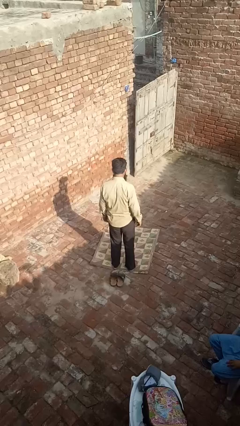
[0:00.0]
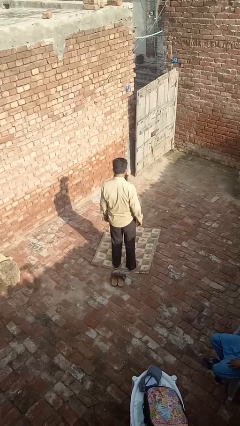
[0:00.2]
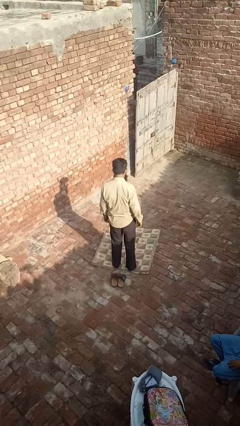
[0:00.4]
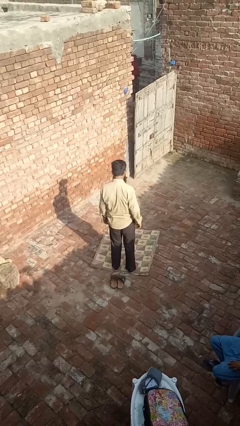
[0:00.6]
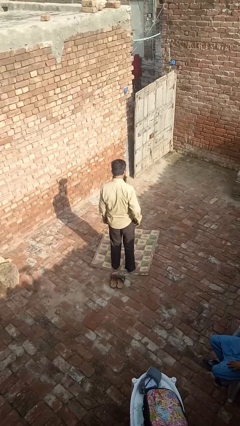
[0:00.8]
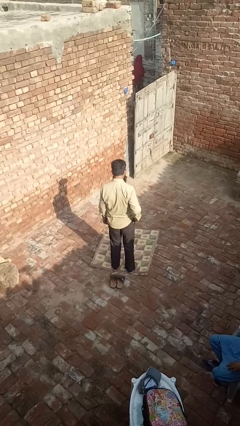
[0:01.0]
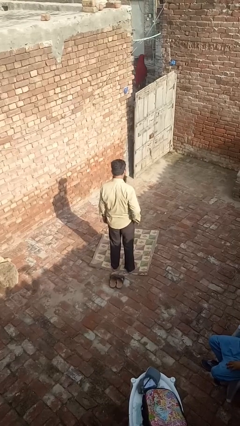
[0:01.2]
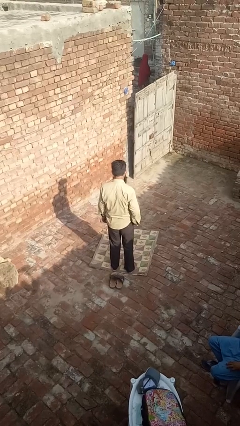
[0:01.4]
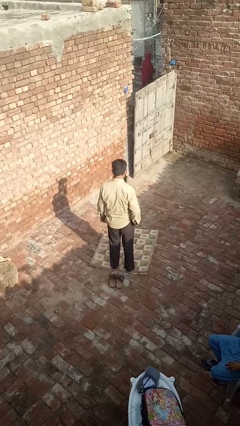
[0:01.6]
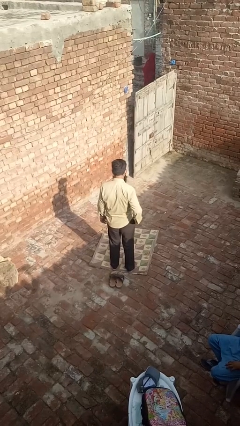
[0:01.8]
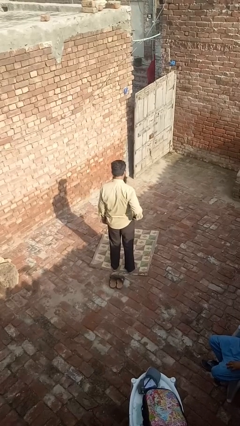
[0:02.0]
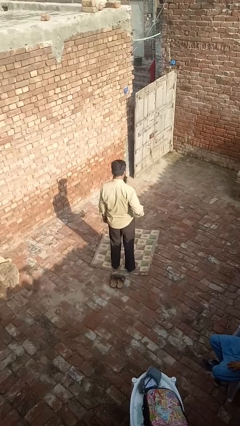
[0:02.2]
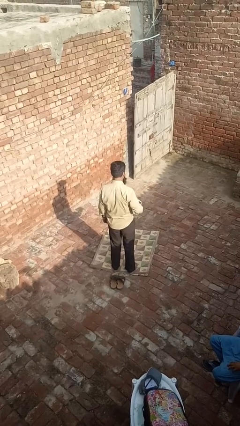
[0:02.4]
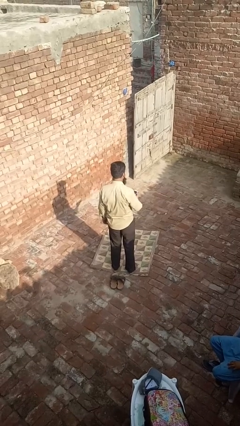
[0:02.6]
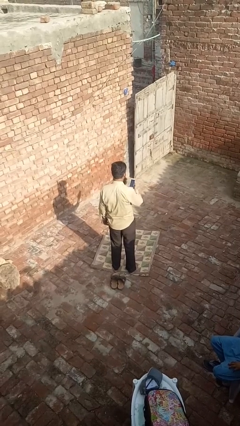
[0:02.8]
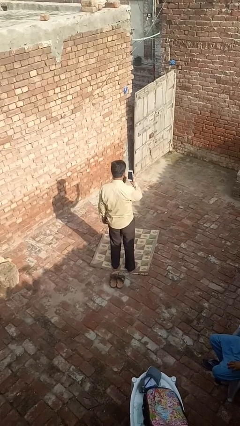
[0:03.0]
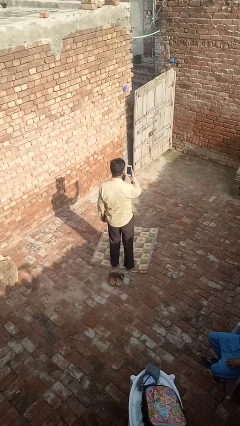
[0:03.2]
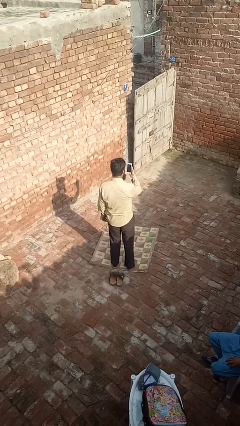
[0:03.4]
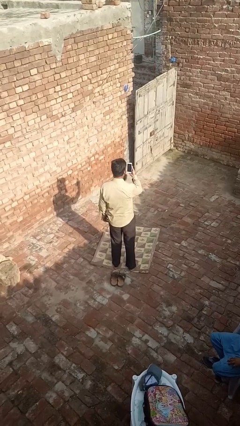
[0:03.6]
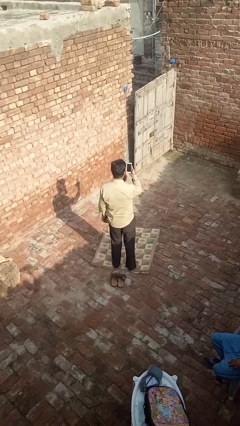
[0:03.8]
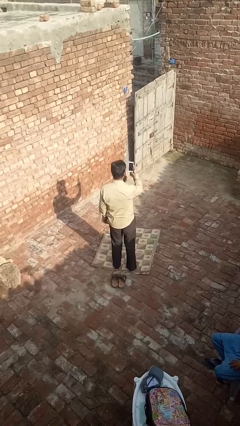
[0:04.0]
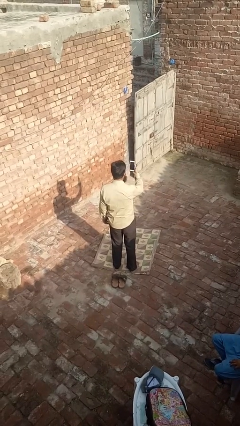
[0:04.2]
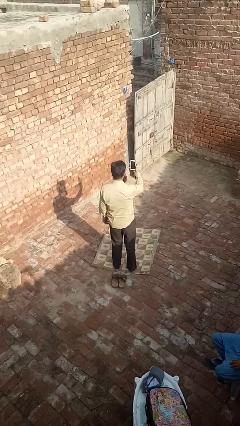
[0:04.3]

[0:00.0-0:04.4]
person takes phone from pocket

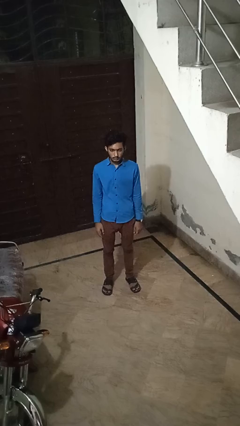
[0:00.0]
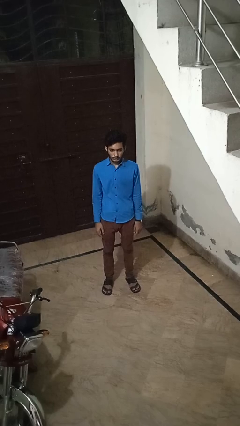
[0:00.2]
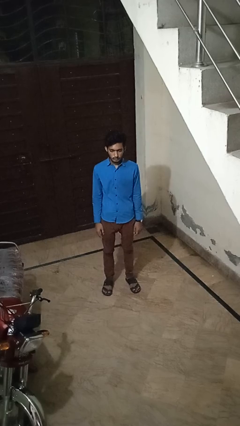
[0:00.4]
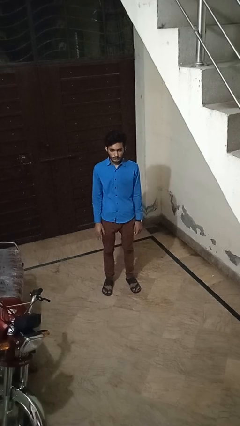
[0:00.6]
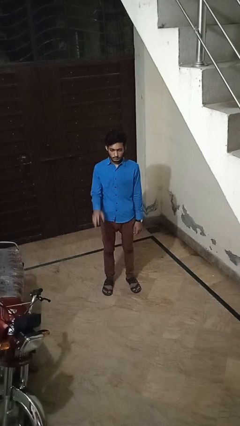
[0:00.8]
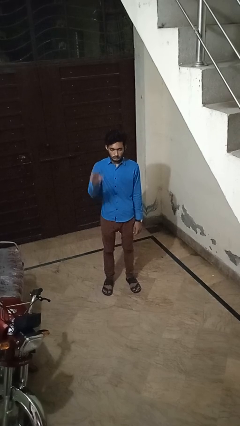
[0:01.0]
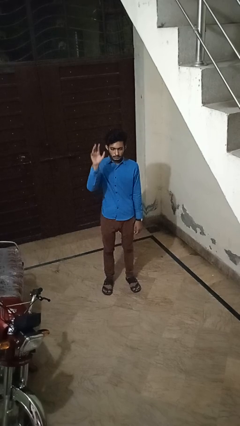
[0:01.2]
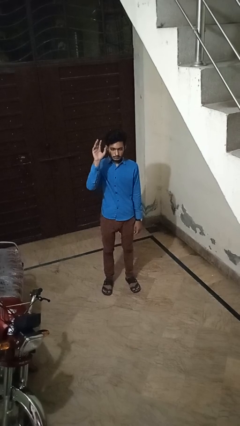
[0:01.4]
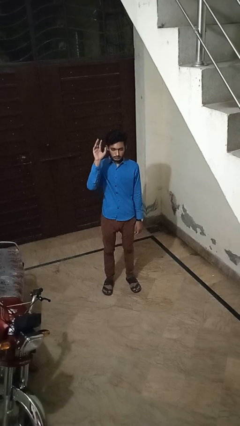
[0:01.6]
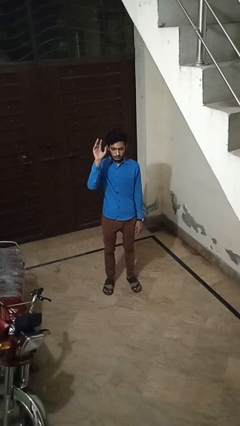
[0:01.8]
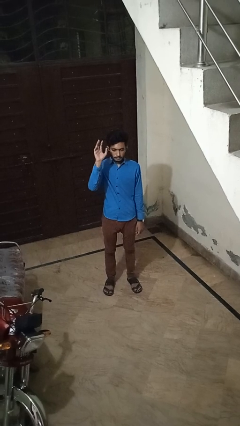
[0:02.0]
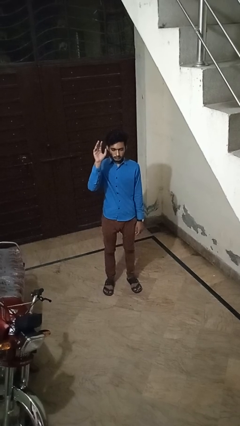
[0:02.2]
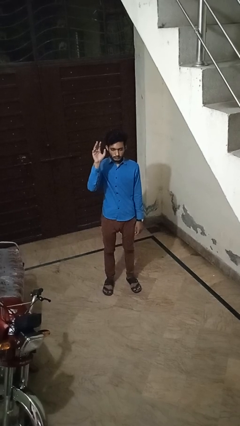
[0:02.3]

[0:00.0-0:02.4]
person gestures raise hand

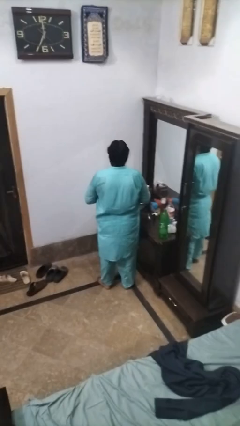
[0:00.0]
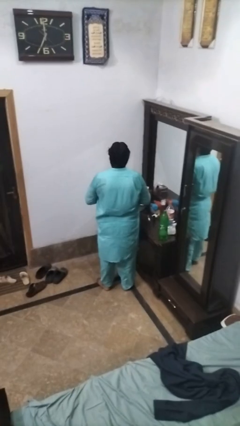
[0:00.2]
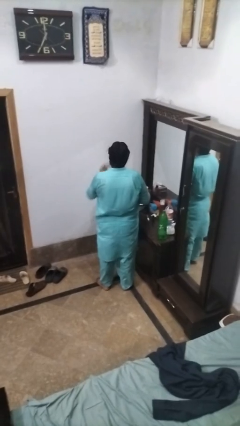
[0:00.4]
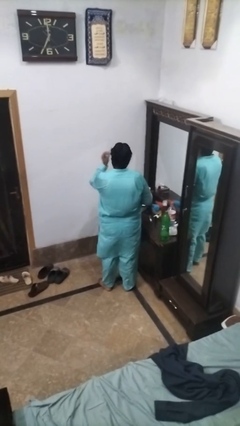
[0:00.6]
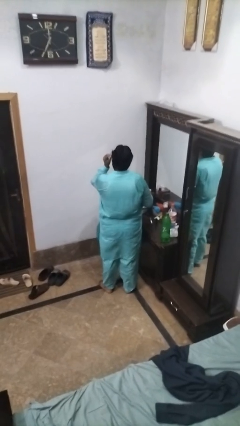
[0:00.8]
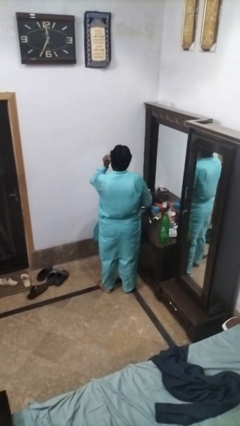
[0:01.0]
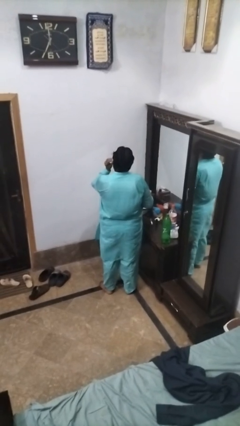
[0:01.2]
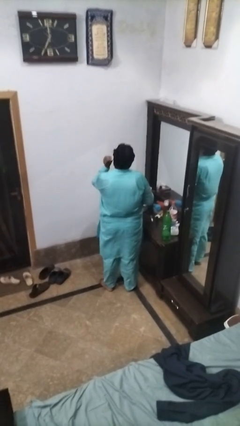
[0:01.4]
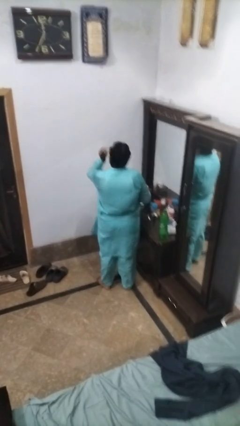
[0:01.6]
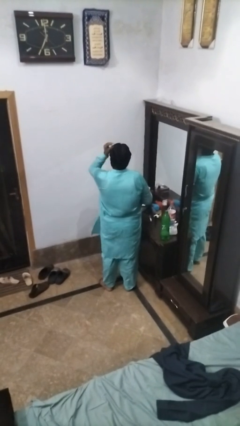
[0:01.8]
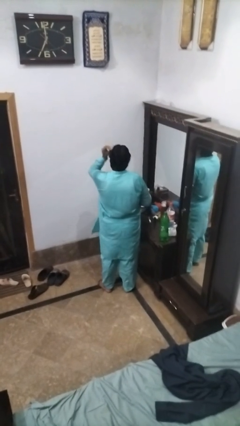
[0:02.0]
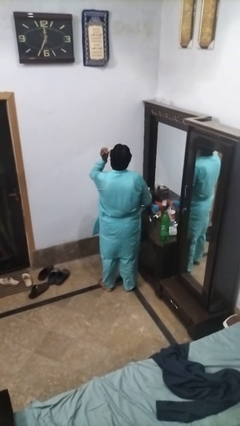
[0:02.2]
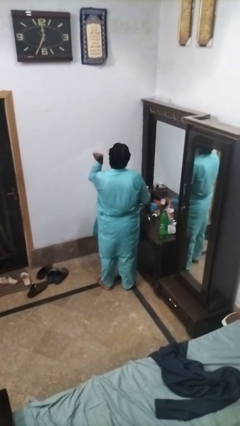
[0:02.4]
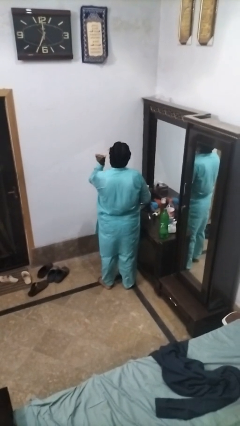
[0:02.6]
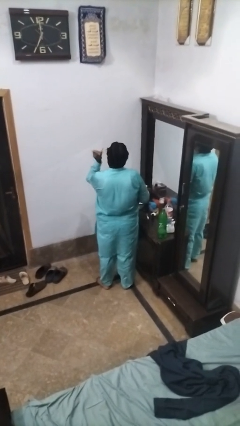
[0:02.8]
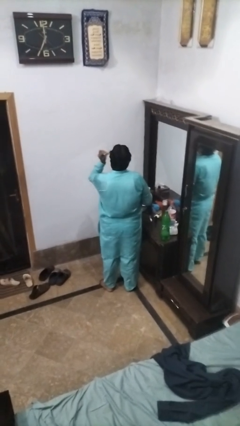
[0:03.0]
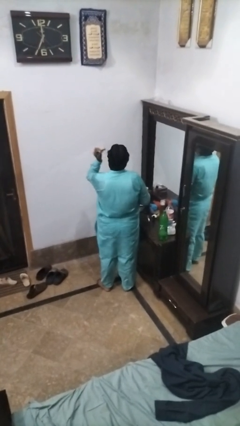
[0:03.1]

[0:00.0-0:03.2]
person applies foundation makeup

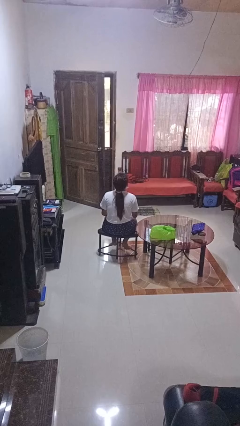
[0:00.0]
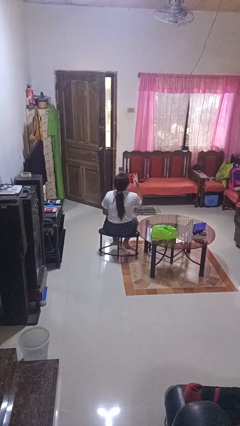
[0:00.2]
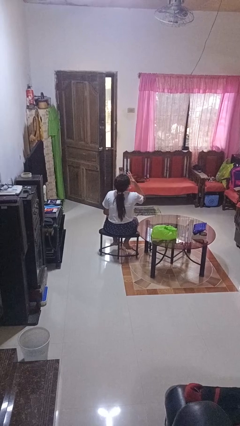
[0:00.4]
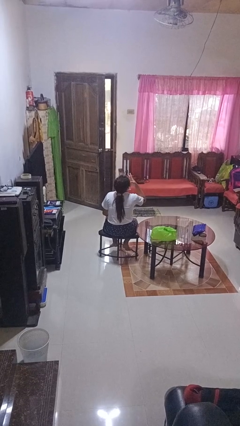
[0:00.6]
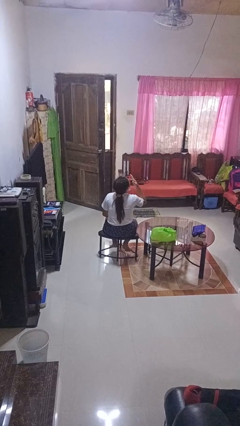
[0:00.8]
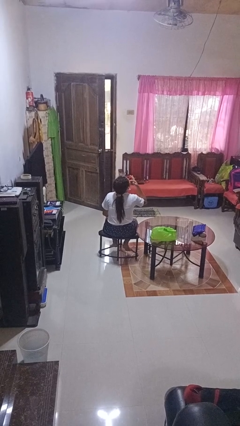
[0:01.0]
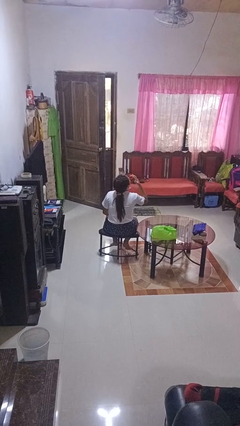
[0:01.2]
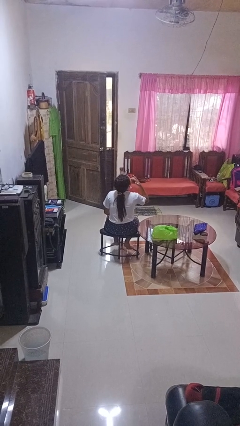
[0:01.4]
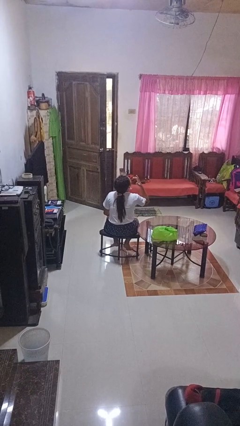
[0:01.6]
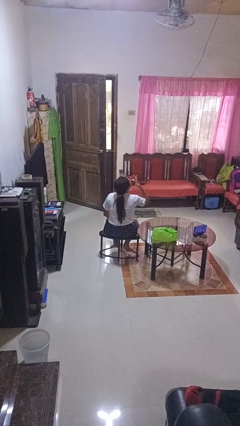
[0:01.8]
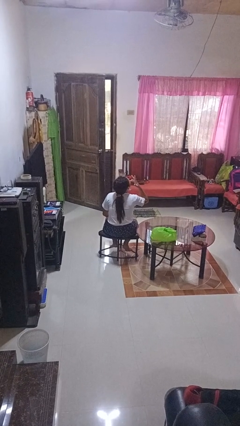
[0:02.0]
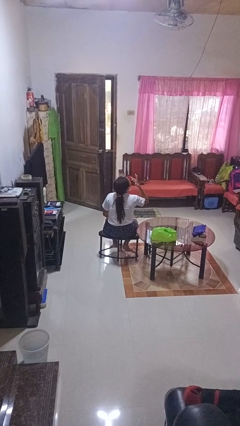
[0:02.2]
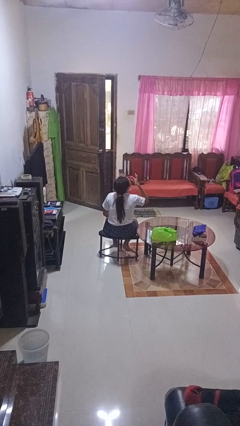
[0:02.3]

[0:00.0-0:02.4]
person licks fingers

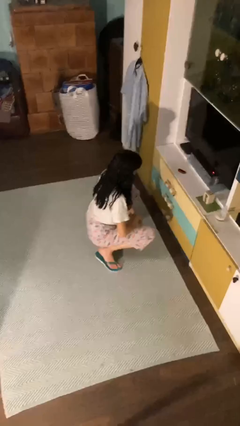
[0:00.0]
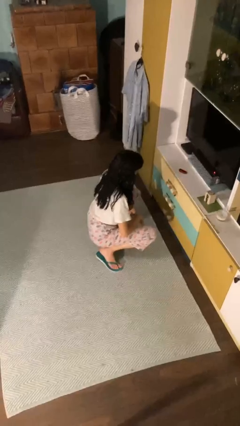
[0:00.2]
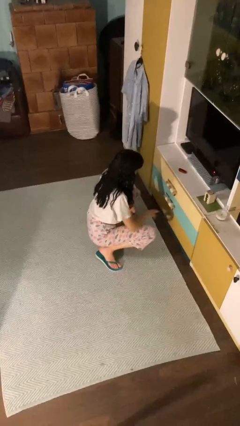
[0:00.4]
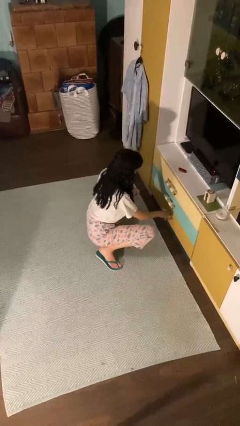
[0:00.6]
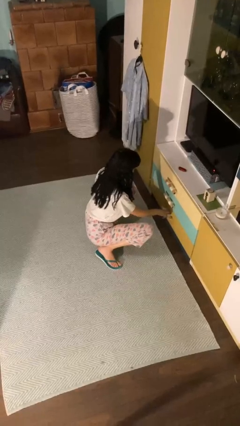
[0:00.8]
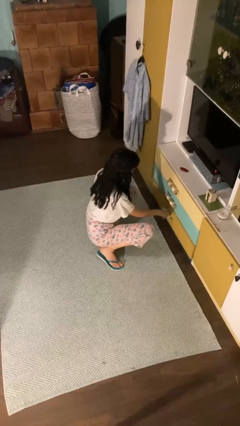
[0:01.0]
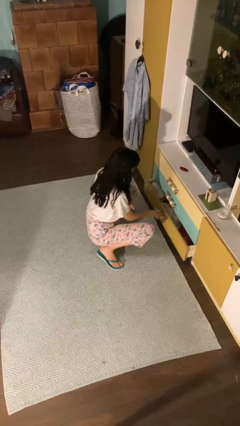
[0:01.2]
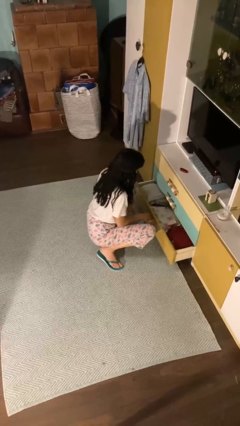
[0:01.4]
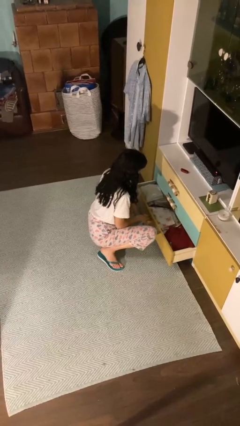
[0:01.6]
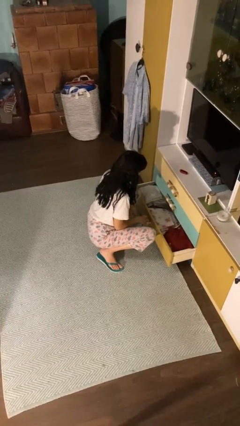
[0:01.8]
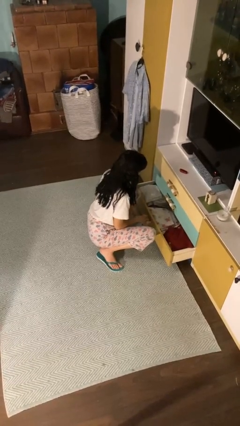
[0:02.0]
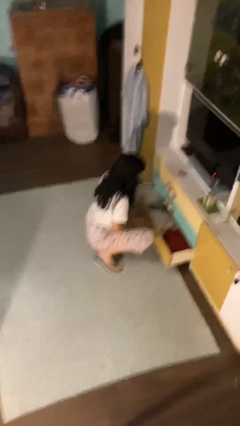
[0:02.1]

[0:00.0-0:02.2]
person opens dresser drawer

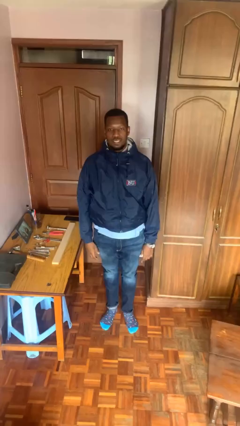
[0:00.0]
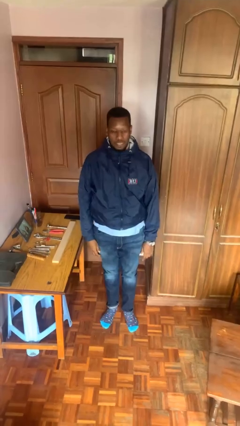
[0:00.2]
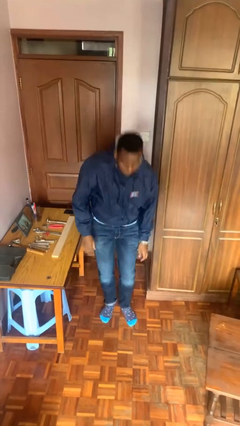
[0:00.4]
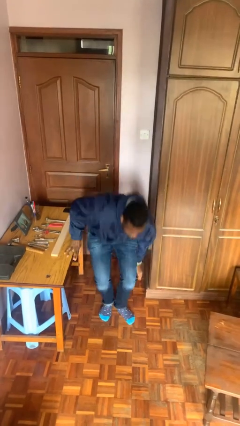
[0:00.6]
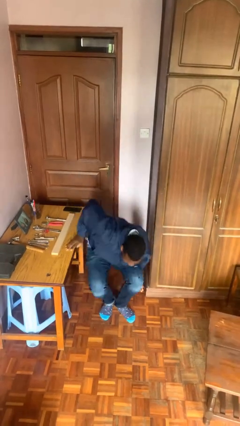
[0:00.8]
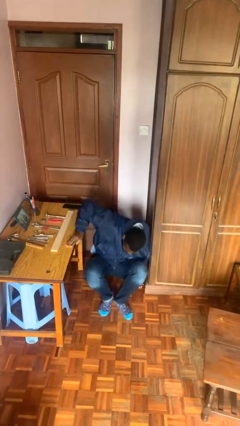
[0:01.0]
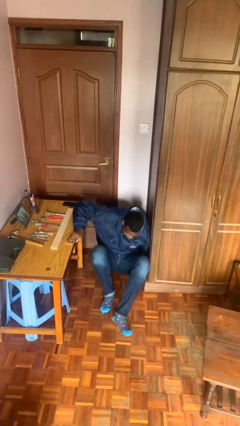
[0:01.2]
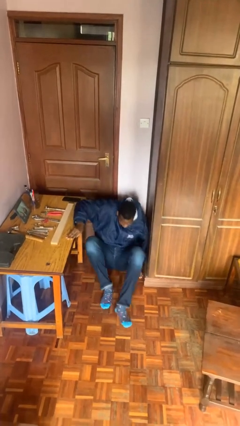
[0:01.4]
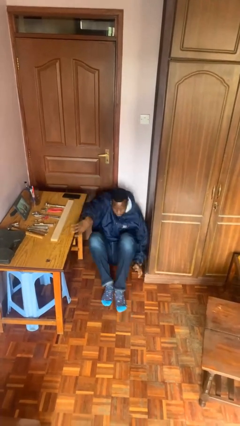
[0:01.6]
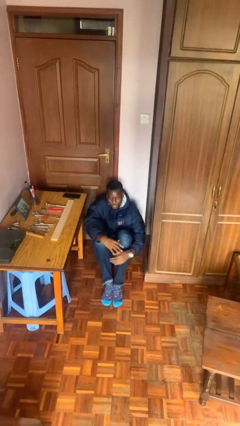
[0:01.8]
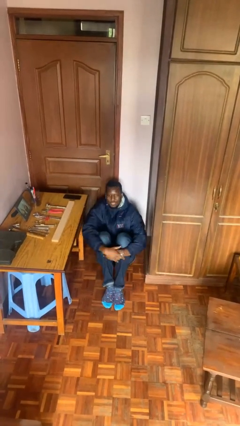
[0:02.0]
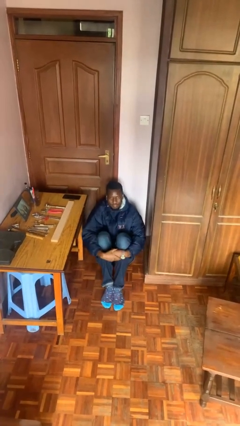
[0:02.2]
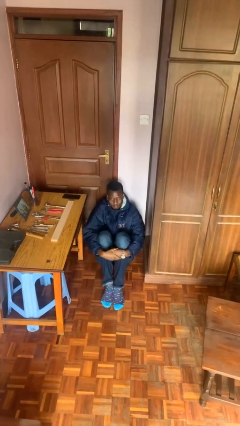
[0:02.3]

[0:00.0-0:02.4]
person sits down

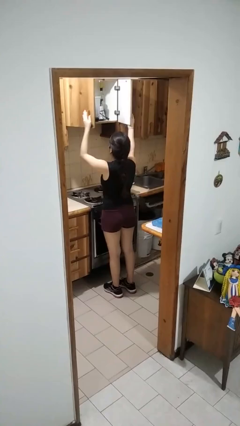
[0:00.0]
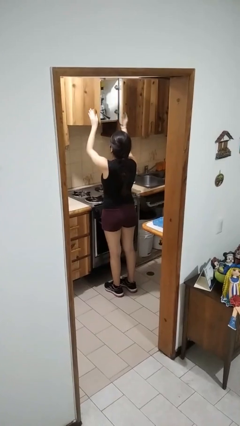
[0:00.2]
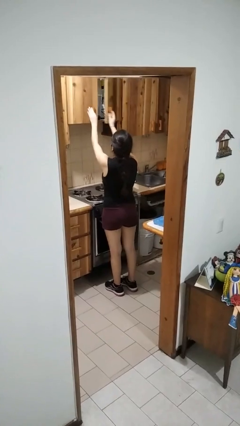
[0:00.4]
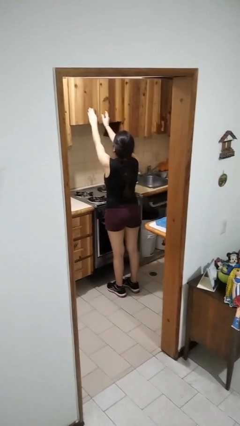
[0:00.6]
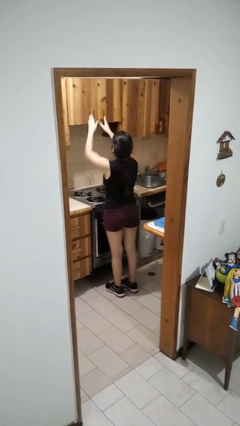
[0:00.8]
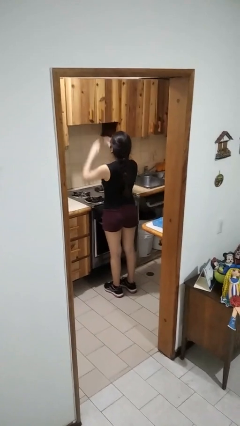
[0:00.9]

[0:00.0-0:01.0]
person closes cabinet
